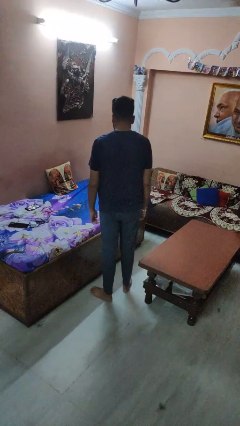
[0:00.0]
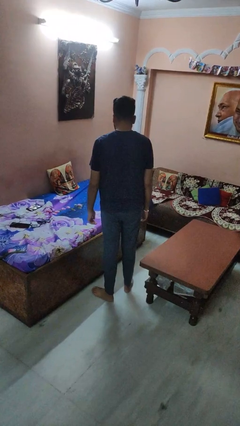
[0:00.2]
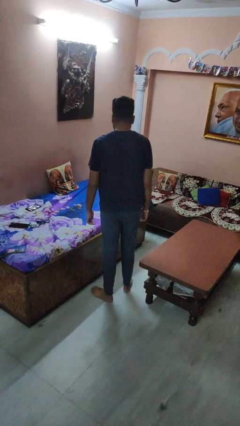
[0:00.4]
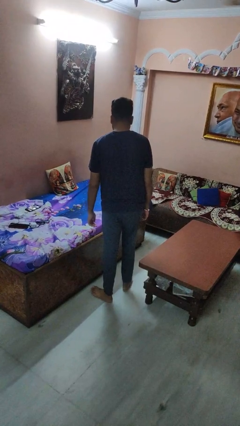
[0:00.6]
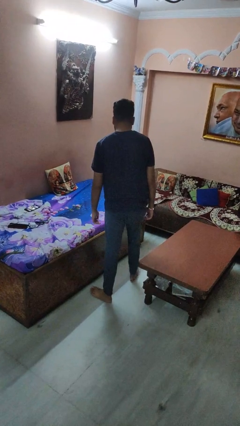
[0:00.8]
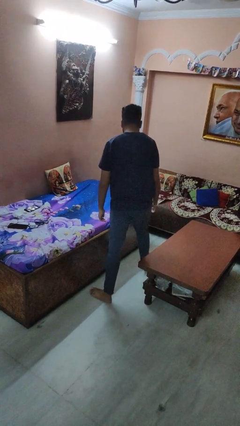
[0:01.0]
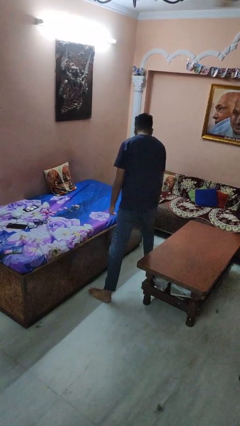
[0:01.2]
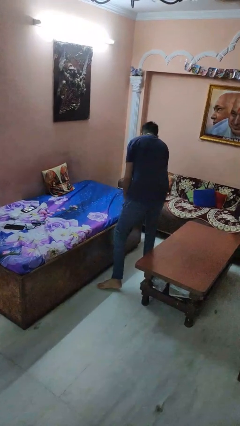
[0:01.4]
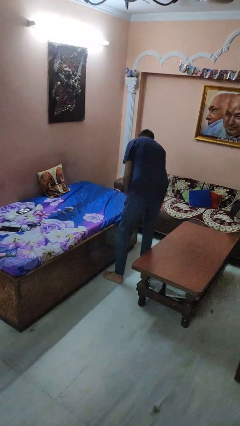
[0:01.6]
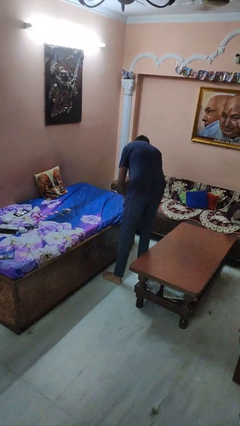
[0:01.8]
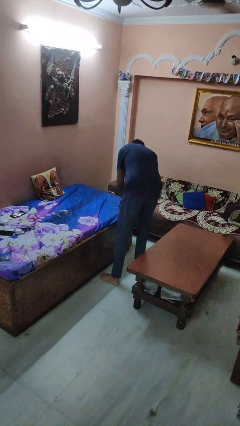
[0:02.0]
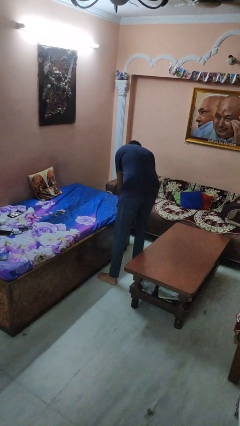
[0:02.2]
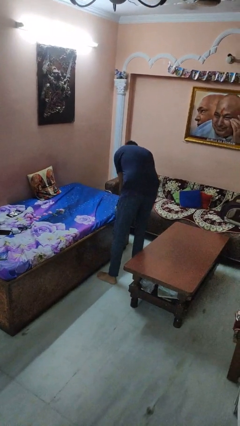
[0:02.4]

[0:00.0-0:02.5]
person makes bed

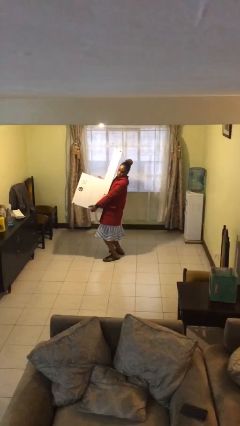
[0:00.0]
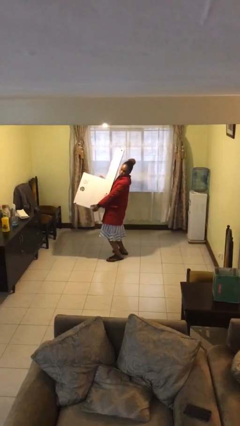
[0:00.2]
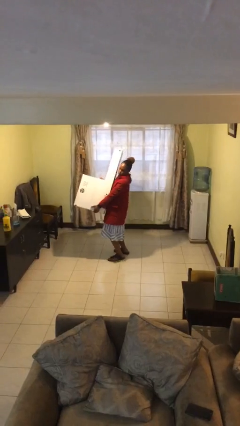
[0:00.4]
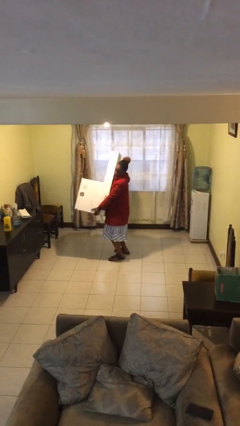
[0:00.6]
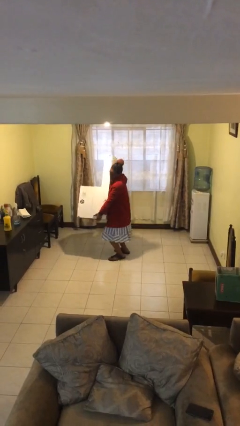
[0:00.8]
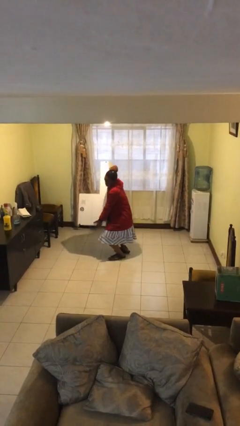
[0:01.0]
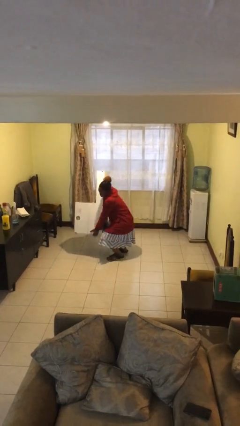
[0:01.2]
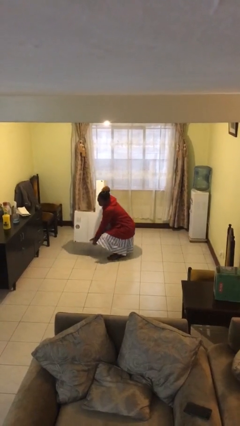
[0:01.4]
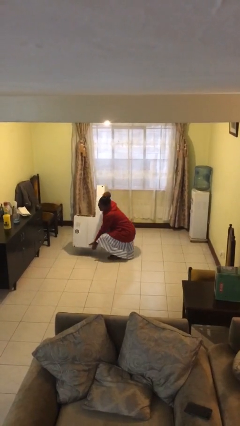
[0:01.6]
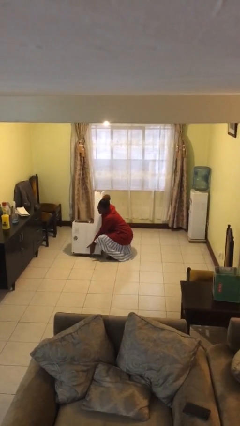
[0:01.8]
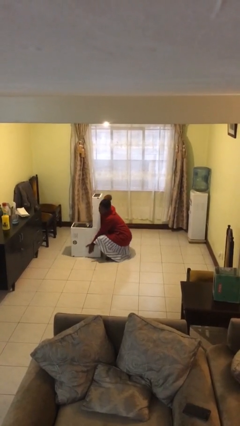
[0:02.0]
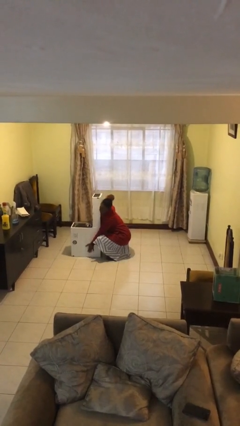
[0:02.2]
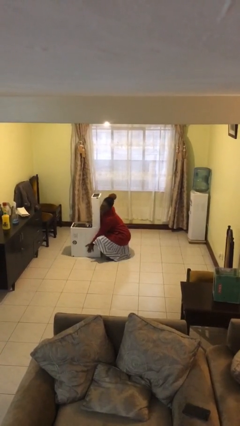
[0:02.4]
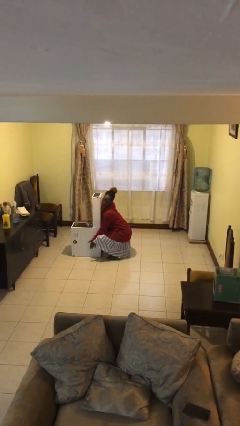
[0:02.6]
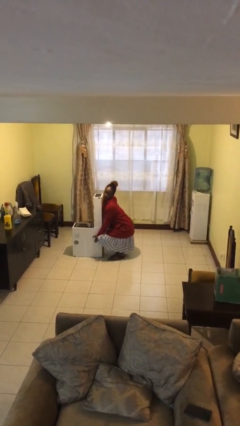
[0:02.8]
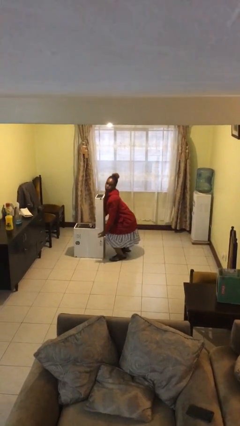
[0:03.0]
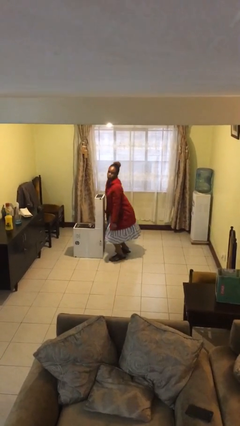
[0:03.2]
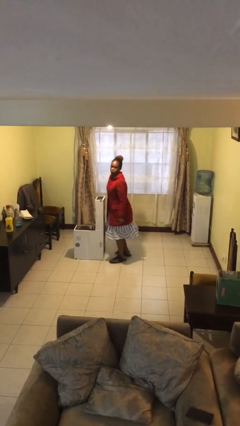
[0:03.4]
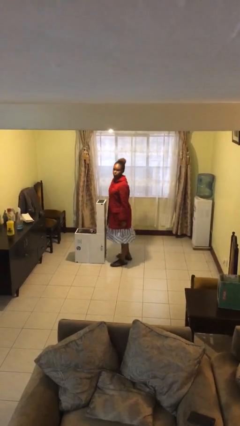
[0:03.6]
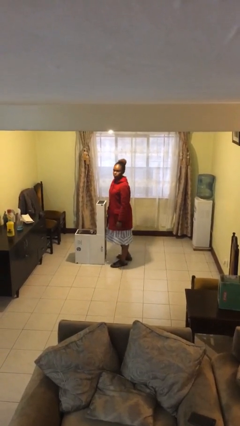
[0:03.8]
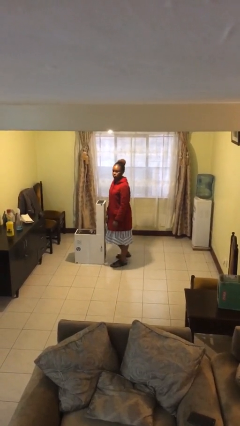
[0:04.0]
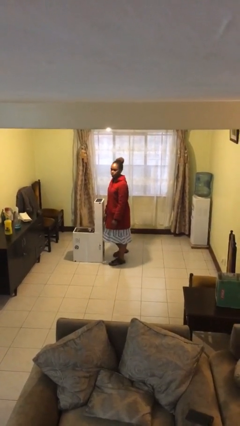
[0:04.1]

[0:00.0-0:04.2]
person puts down object on floor

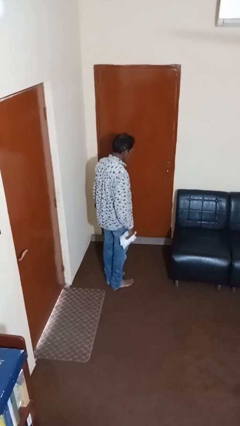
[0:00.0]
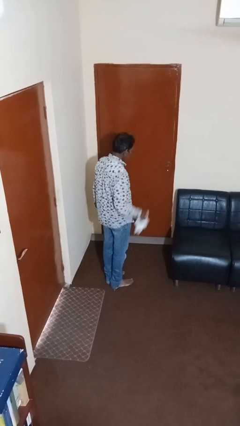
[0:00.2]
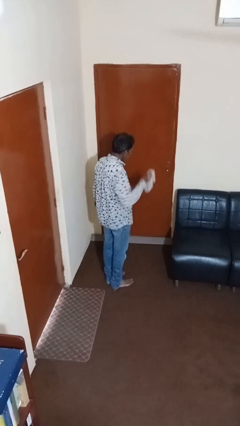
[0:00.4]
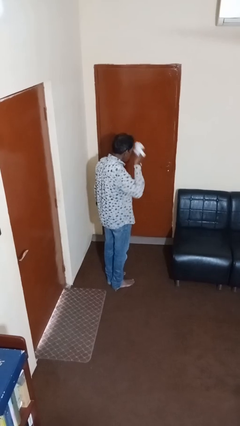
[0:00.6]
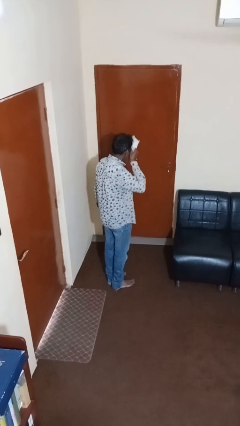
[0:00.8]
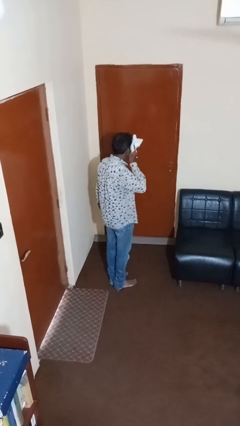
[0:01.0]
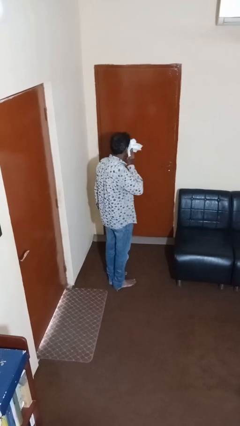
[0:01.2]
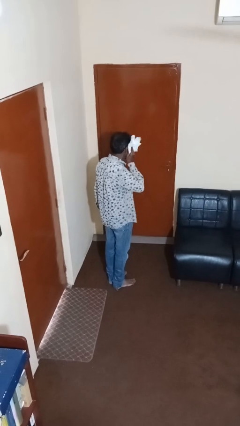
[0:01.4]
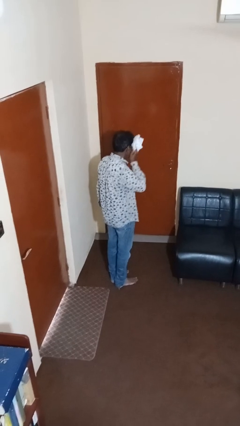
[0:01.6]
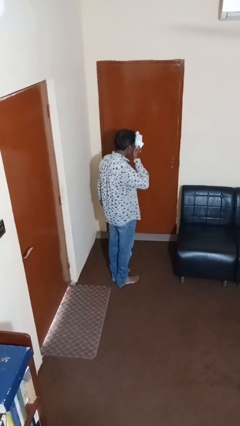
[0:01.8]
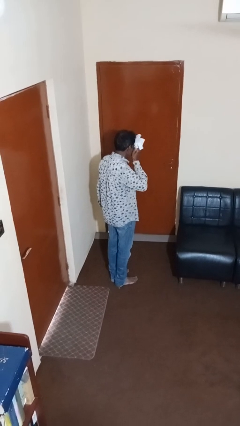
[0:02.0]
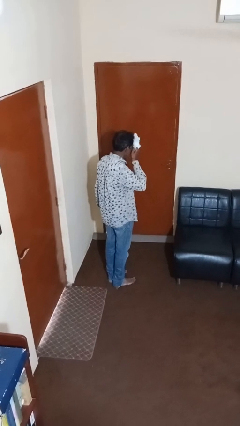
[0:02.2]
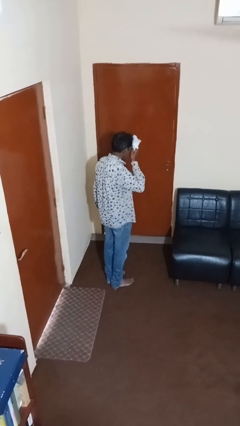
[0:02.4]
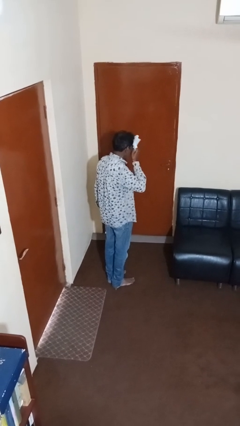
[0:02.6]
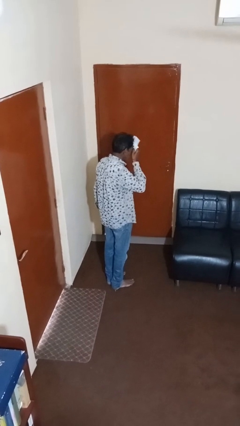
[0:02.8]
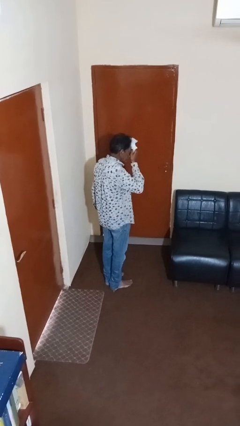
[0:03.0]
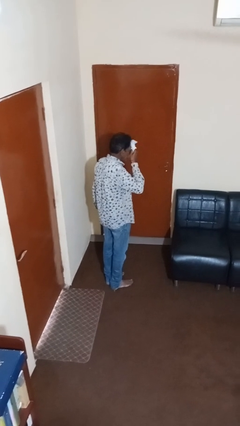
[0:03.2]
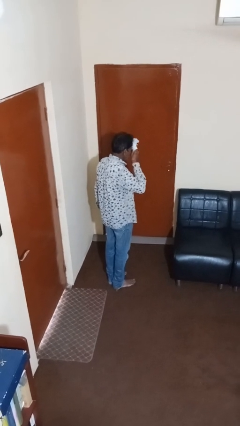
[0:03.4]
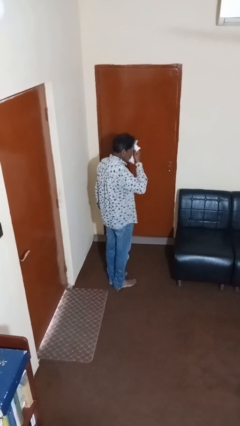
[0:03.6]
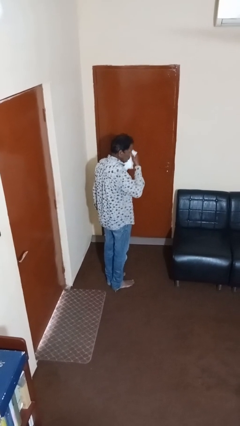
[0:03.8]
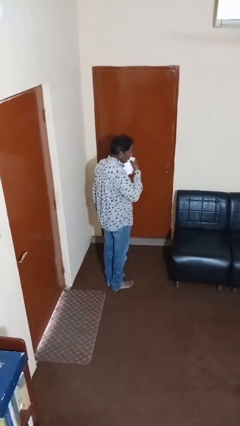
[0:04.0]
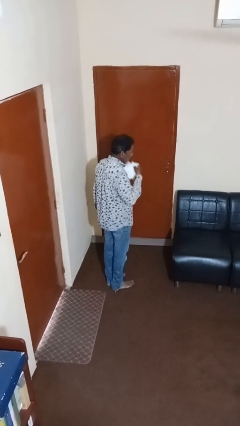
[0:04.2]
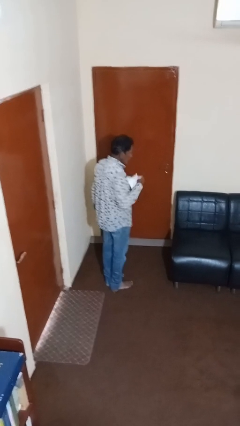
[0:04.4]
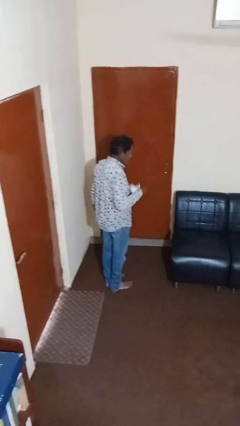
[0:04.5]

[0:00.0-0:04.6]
person wipes mouth with napkin

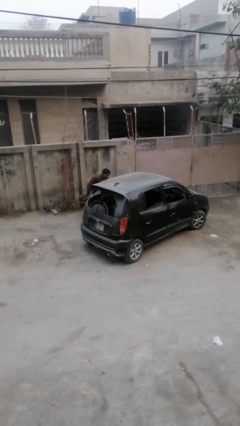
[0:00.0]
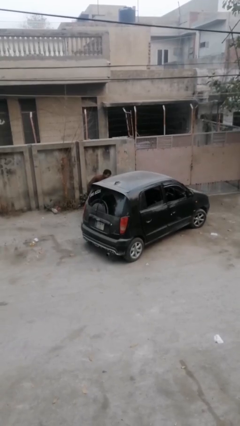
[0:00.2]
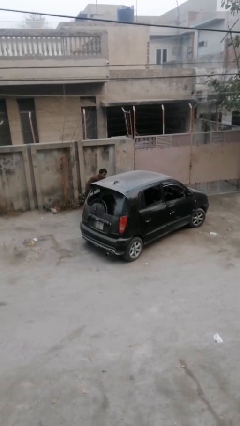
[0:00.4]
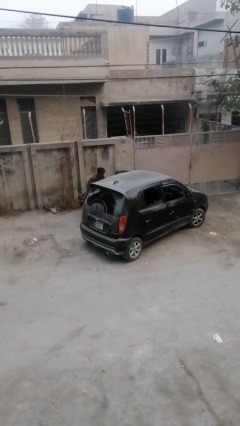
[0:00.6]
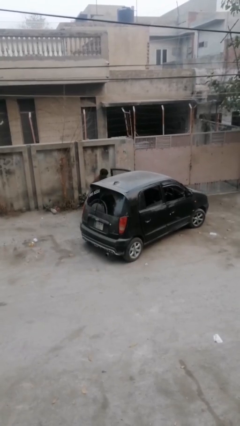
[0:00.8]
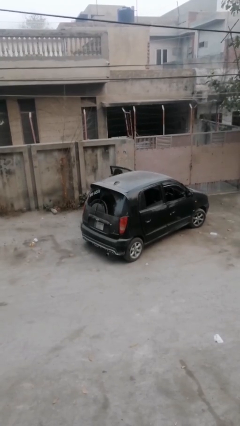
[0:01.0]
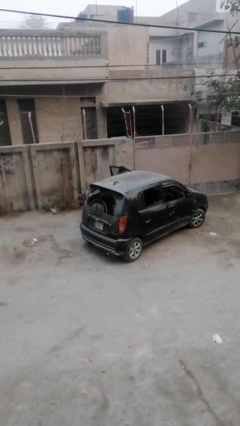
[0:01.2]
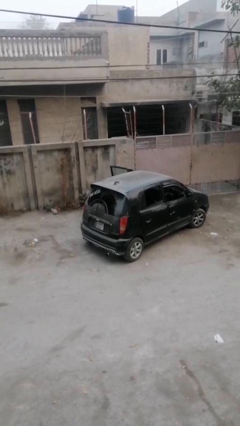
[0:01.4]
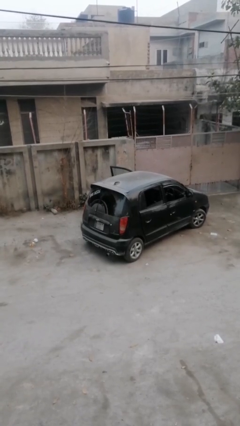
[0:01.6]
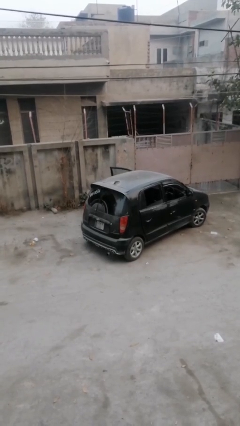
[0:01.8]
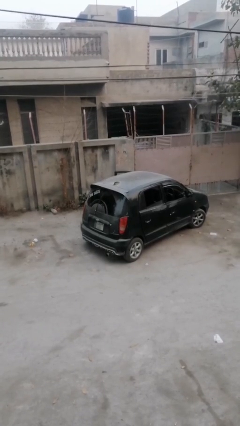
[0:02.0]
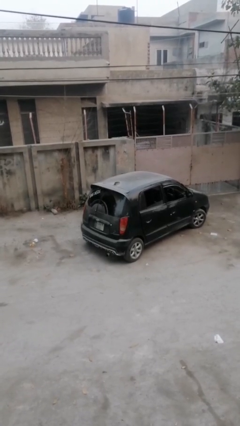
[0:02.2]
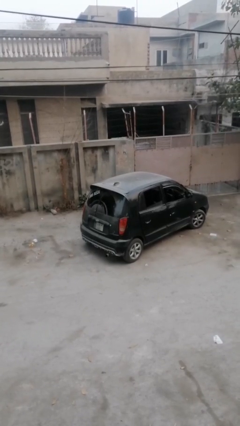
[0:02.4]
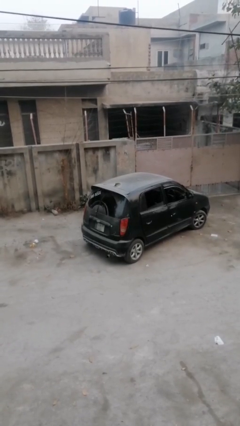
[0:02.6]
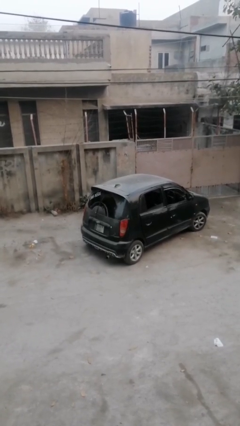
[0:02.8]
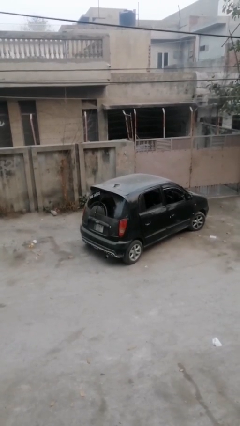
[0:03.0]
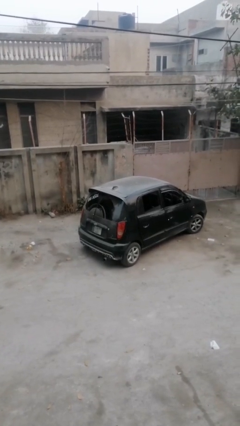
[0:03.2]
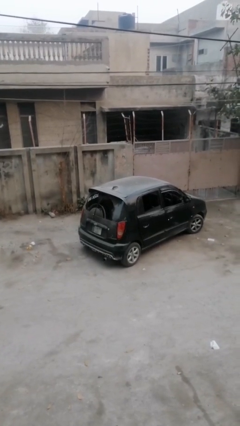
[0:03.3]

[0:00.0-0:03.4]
car picks up person

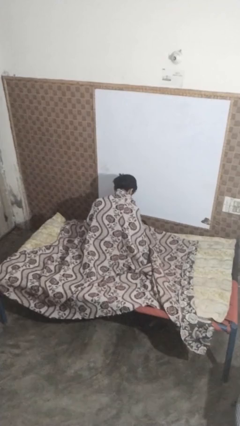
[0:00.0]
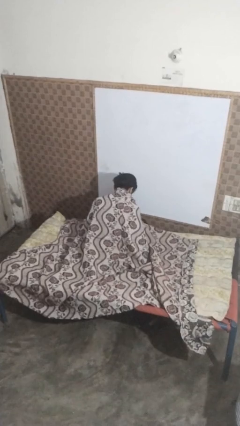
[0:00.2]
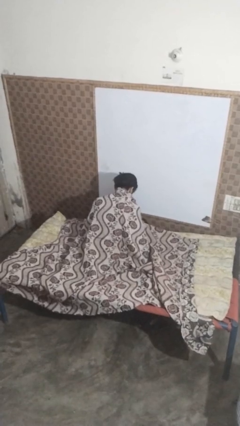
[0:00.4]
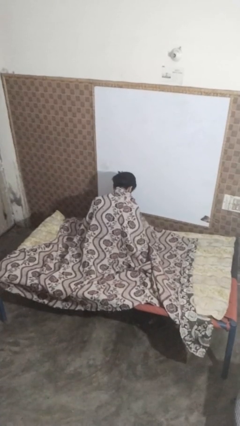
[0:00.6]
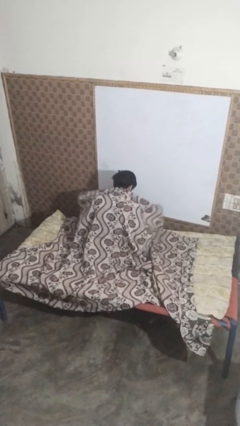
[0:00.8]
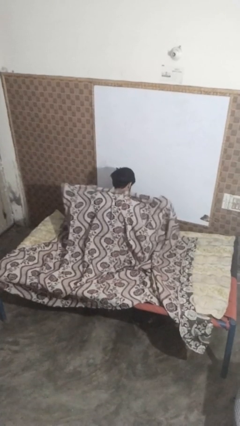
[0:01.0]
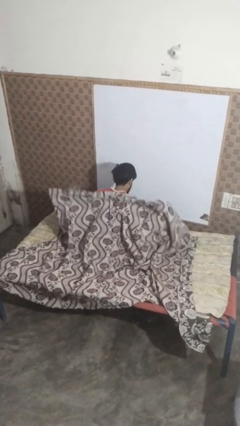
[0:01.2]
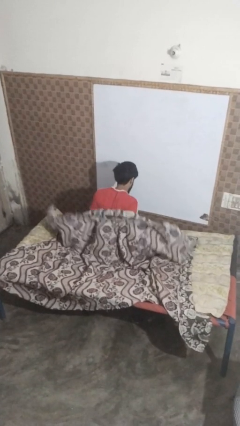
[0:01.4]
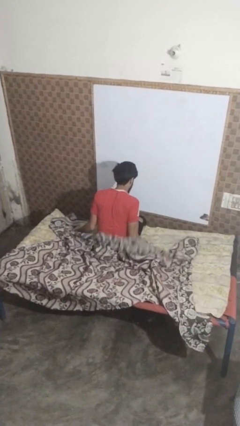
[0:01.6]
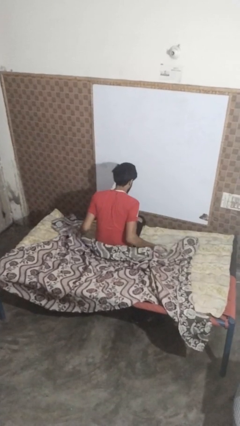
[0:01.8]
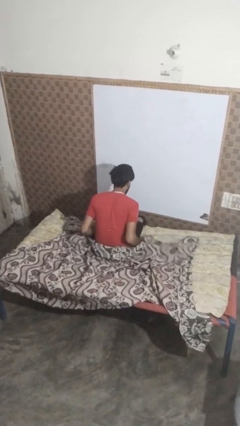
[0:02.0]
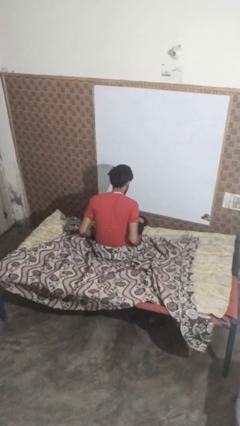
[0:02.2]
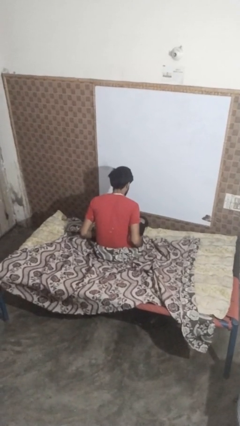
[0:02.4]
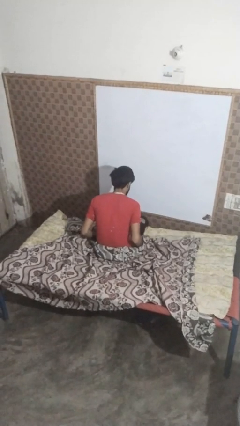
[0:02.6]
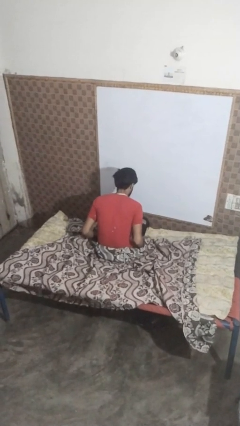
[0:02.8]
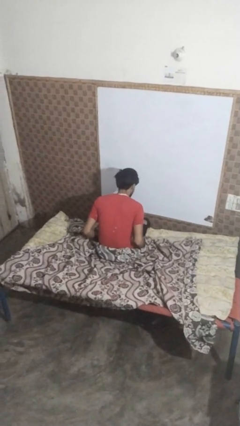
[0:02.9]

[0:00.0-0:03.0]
person uncovers with blanket
